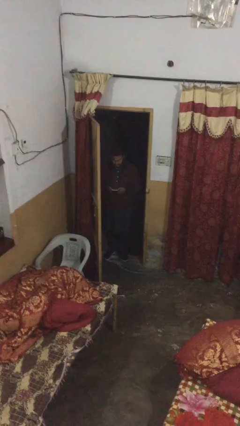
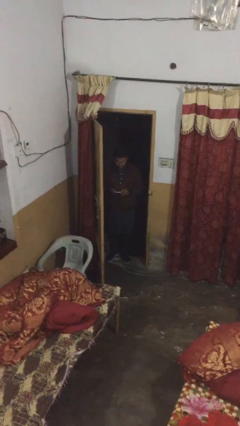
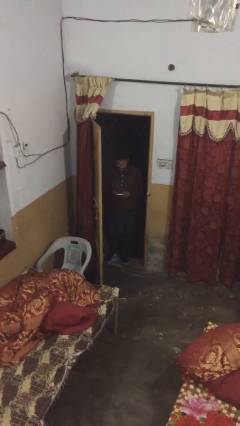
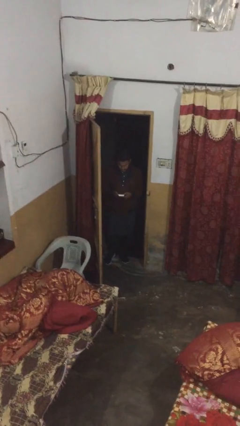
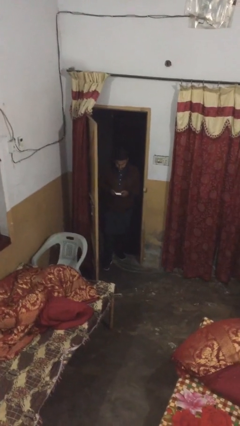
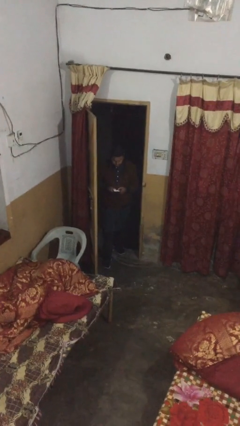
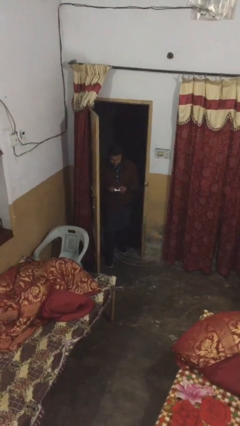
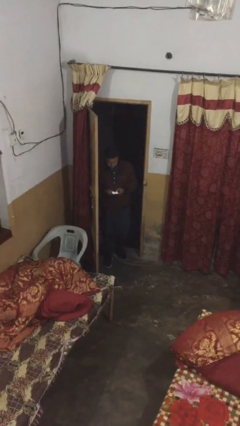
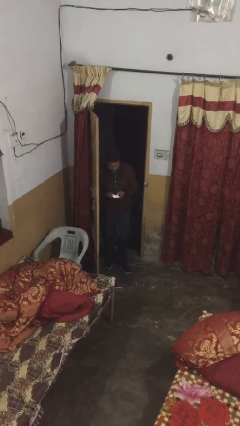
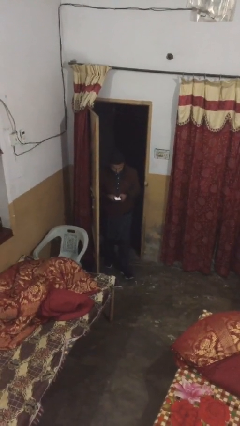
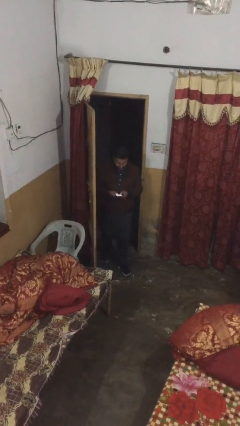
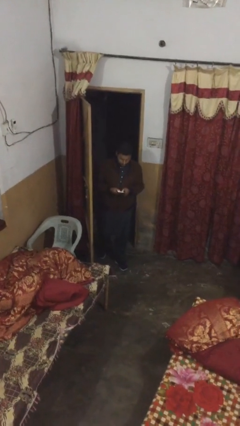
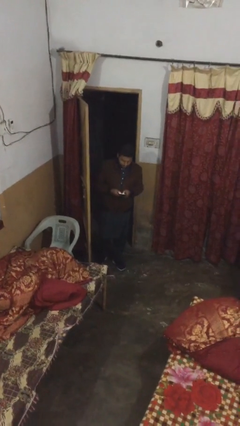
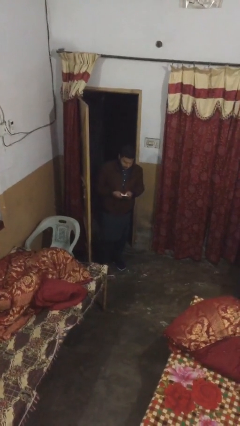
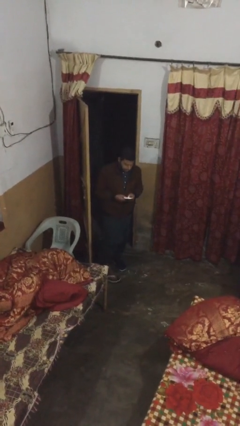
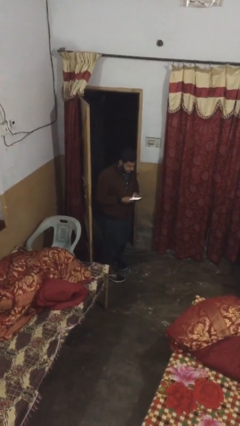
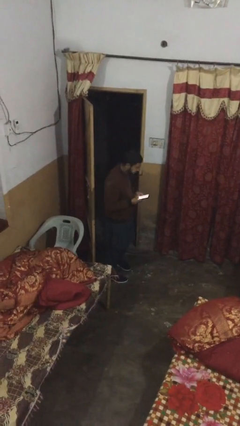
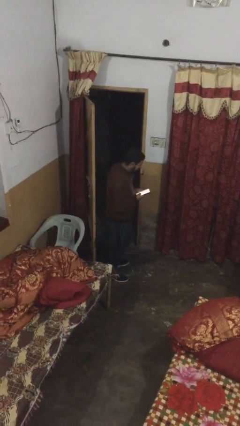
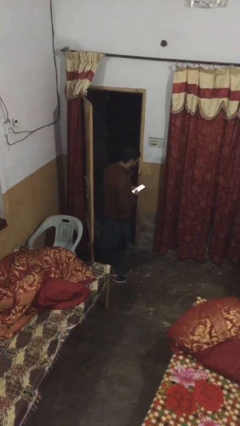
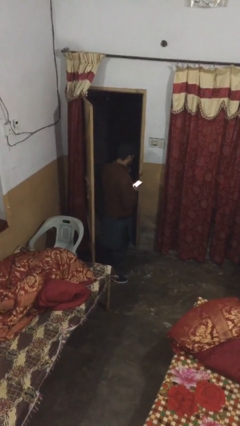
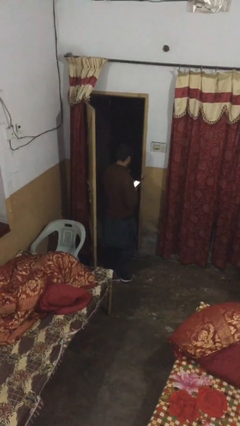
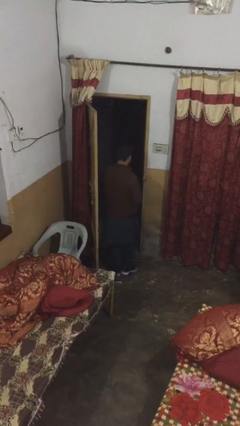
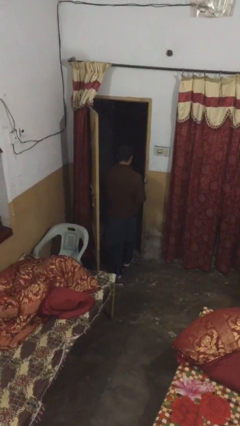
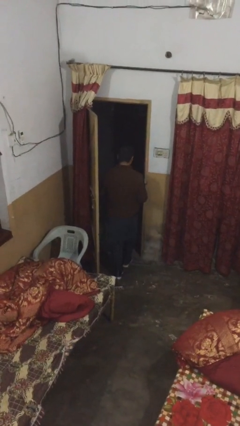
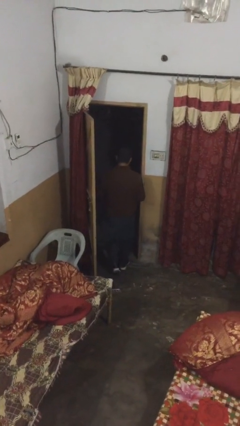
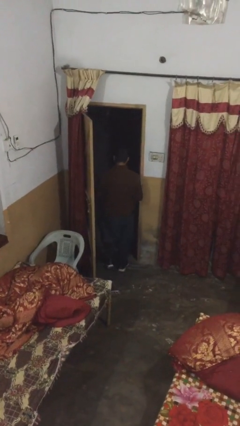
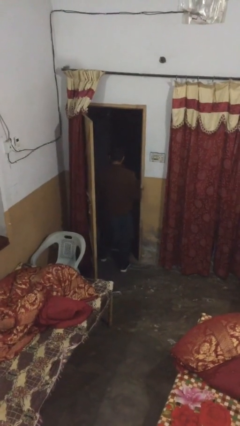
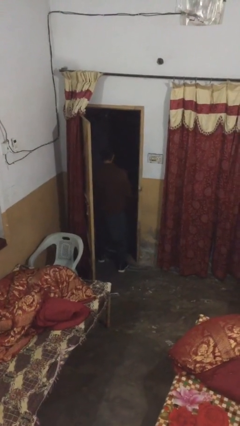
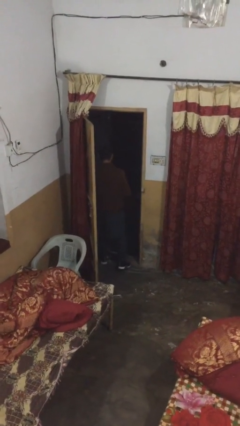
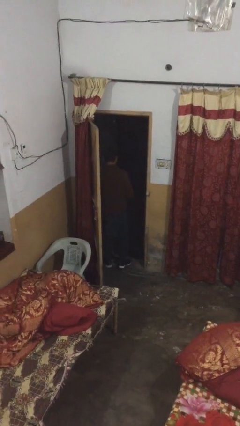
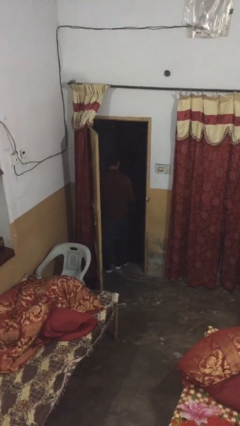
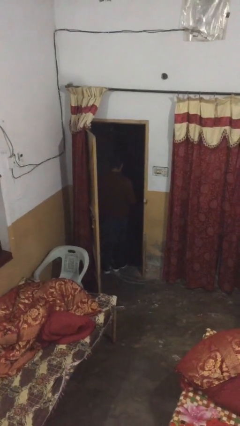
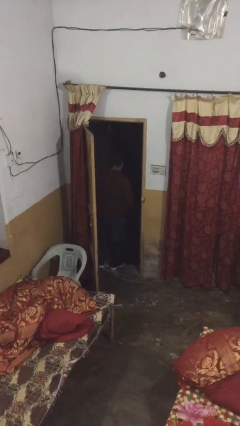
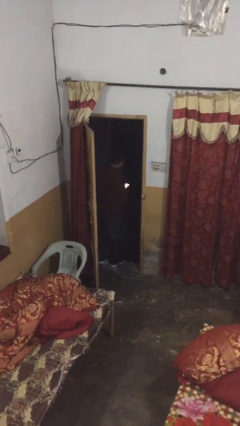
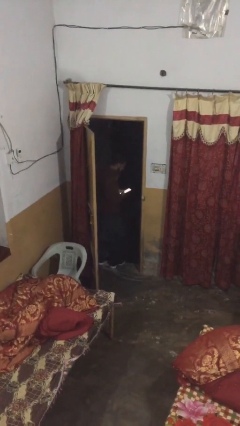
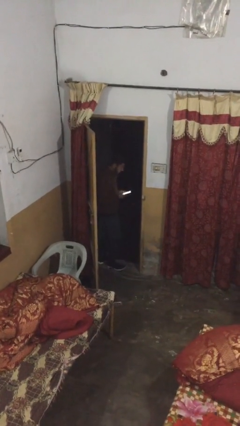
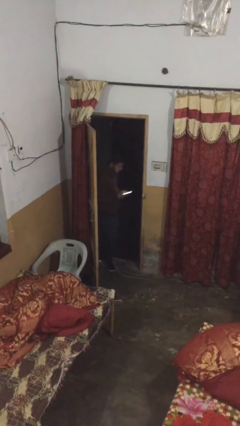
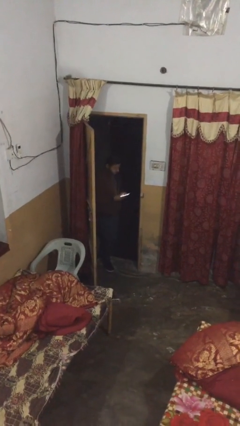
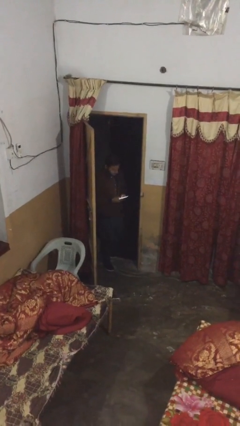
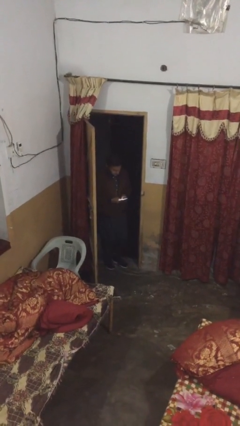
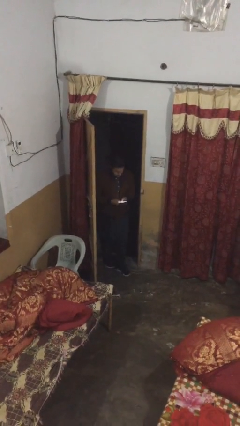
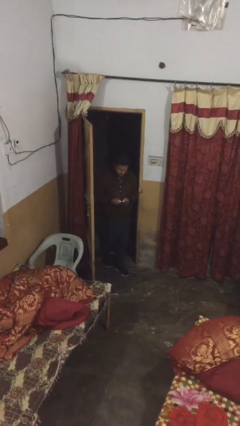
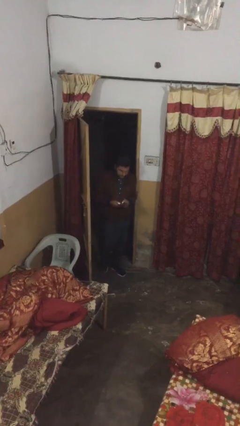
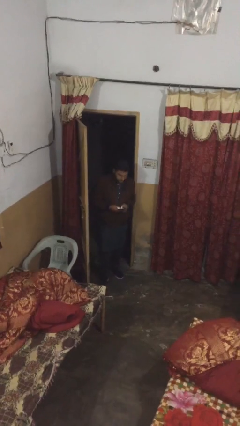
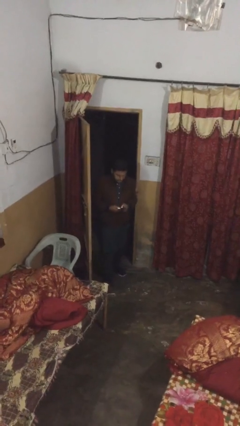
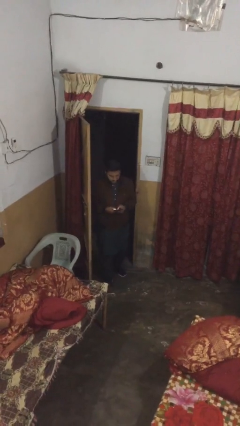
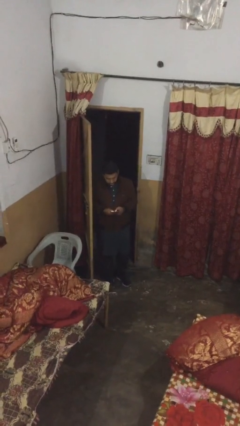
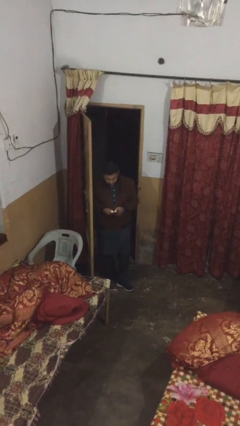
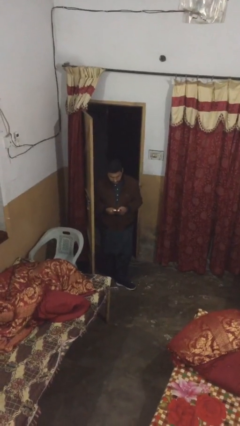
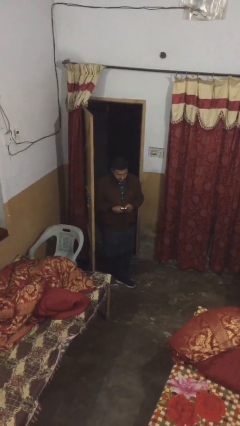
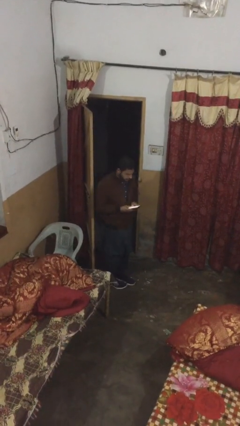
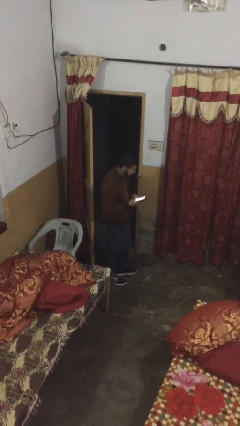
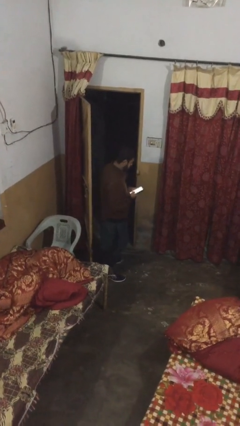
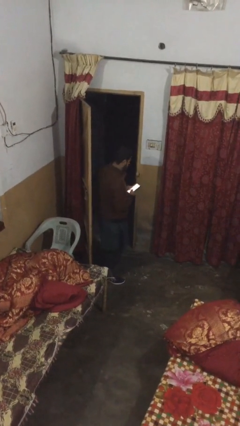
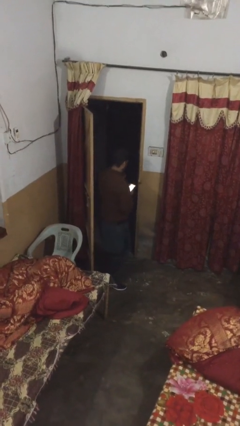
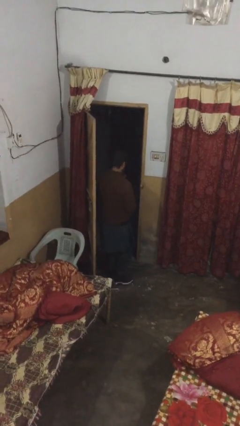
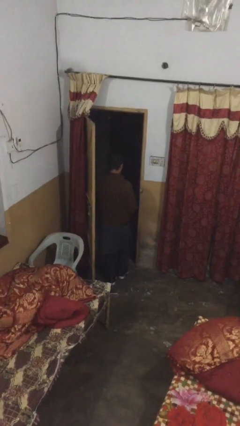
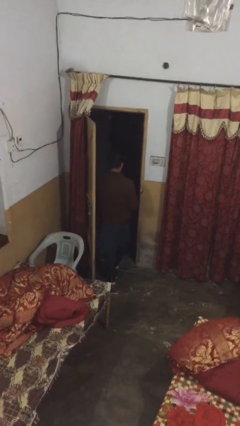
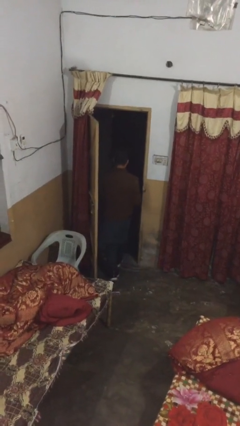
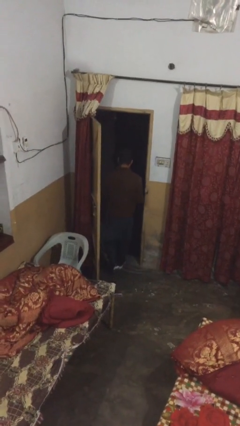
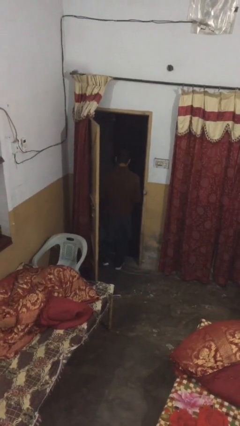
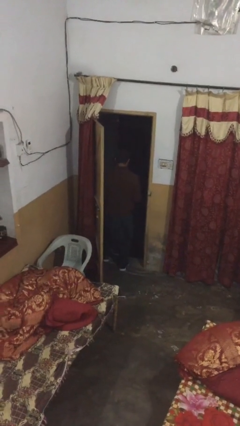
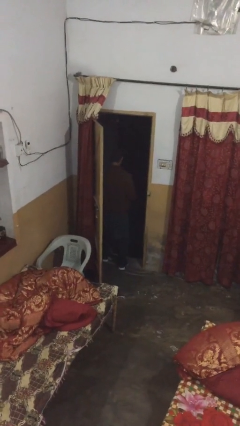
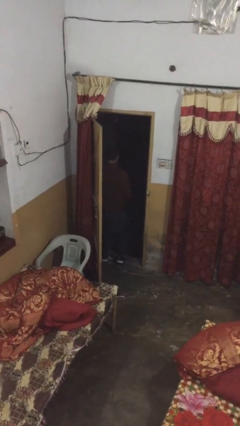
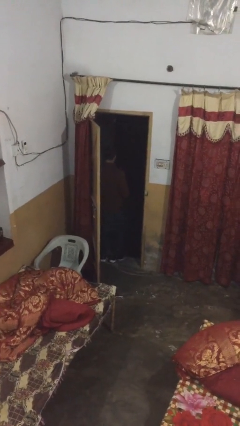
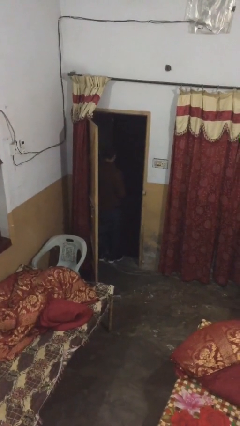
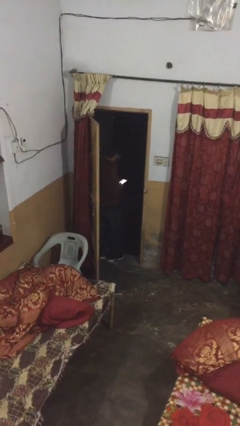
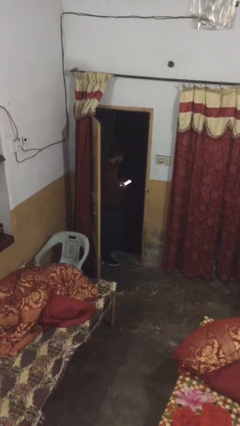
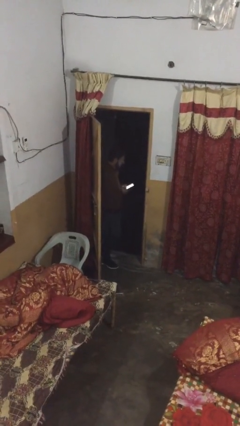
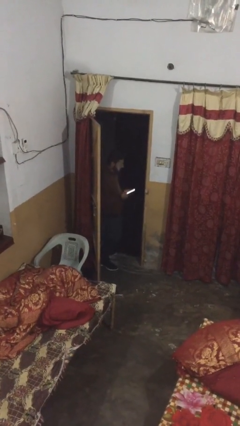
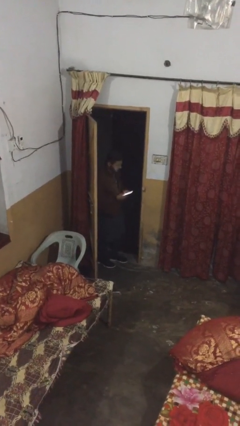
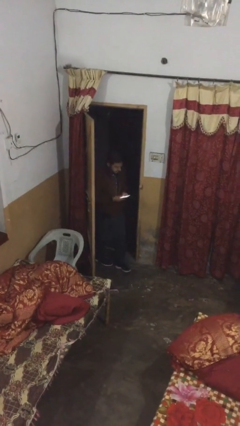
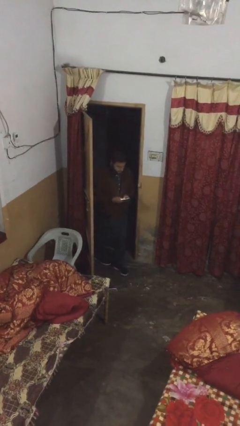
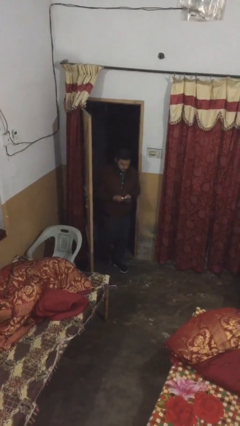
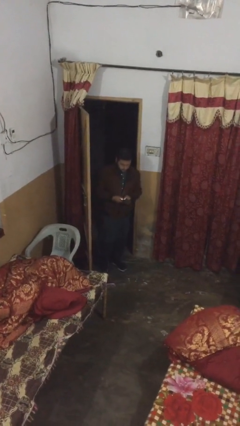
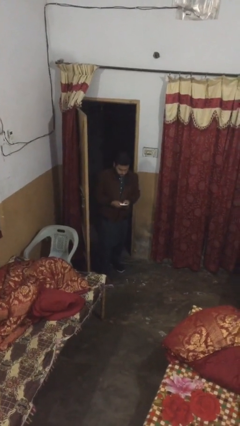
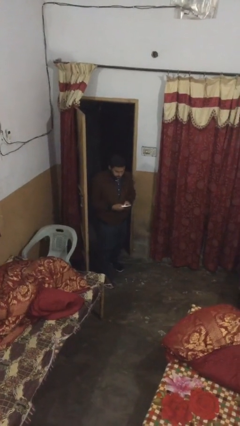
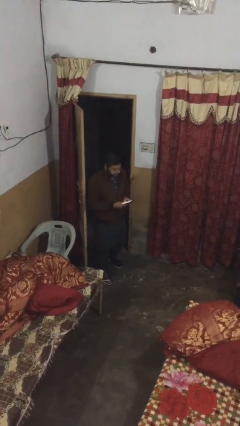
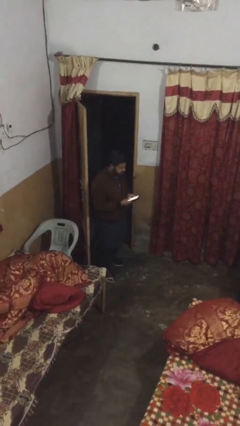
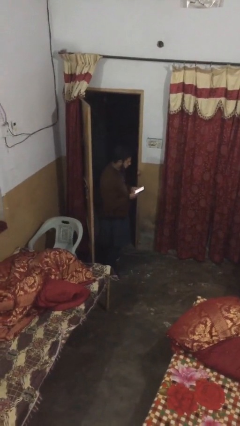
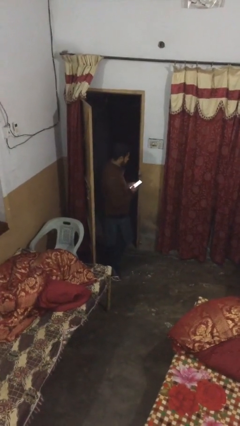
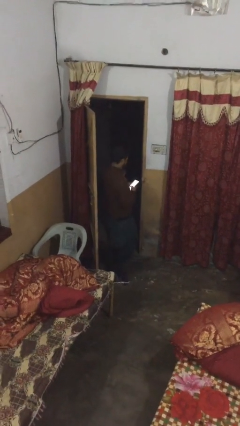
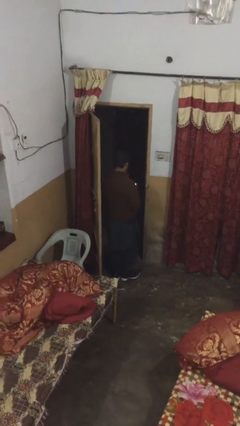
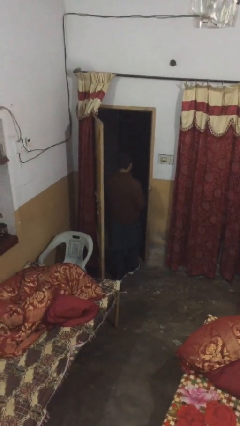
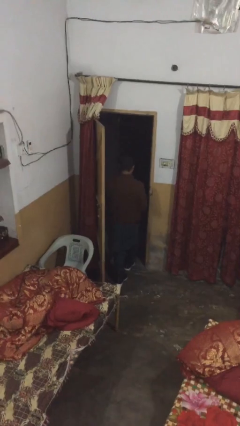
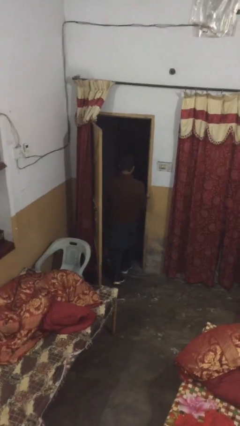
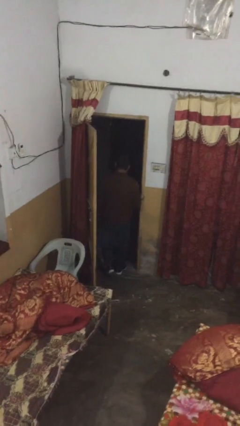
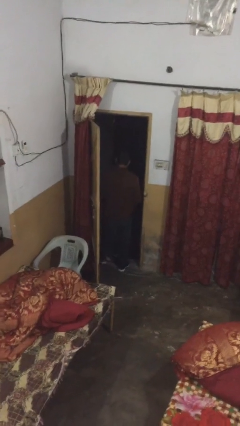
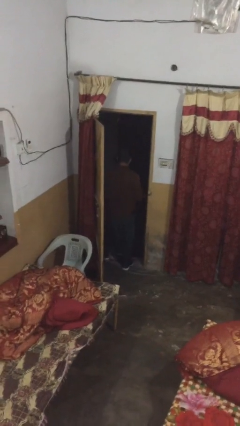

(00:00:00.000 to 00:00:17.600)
person texts on phone

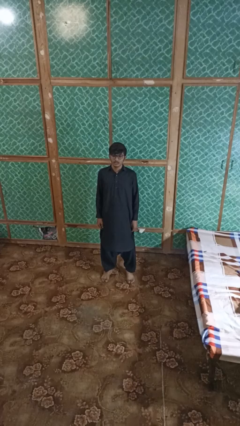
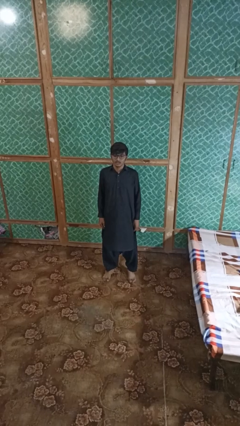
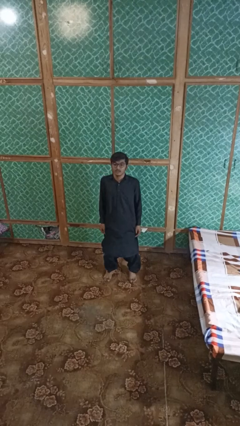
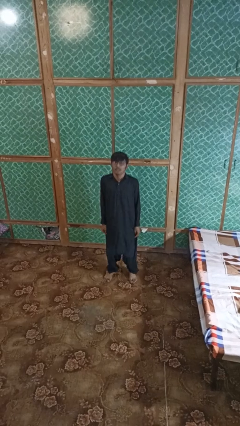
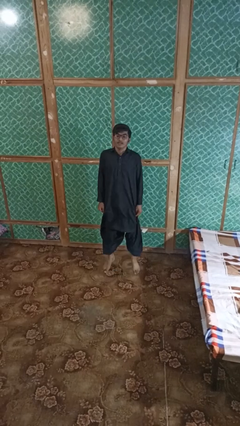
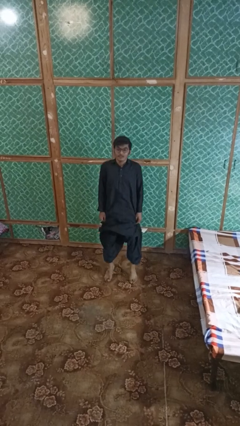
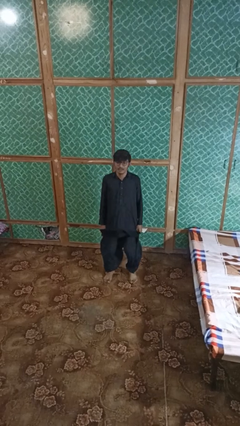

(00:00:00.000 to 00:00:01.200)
person jumps
